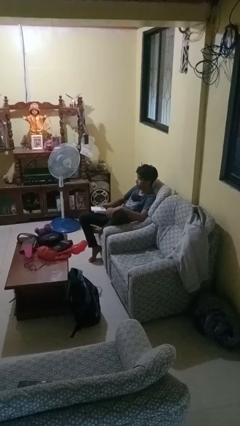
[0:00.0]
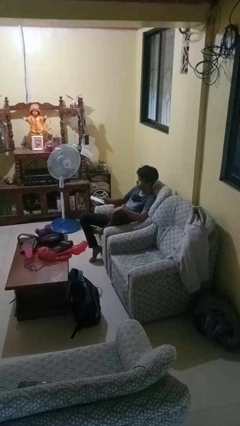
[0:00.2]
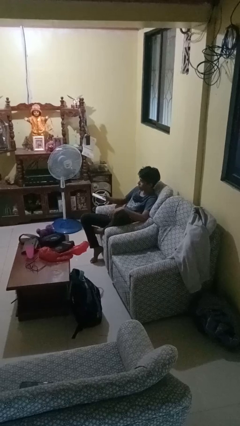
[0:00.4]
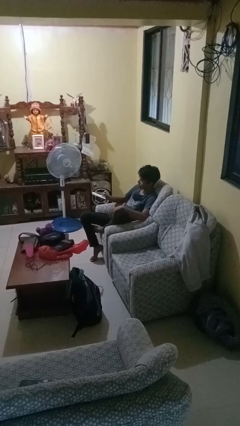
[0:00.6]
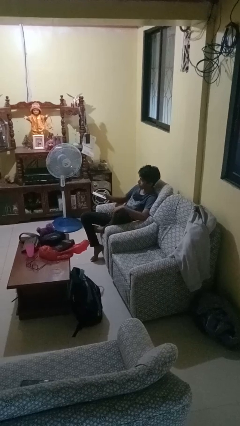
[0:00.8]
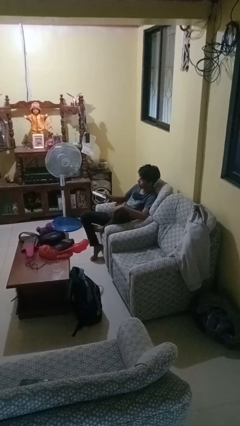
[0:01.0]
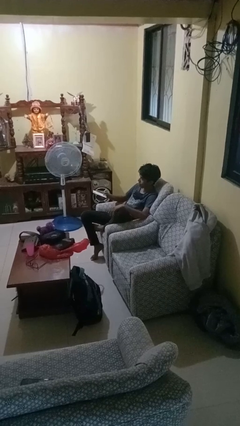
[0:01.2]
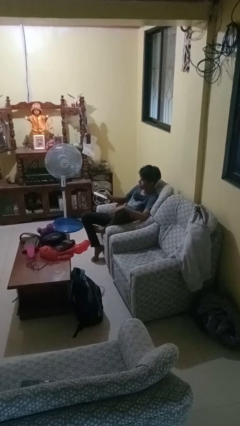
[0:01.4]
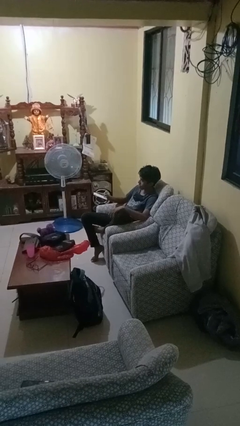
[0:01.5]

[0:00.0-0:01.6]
person uses television remote

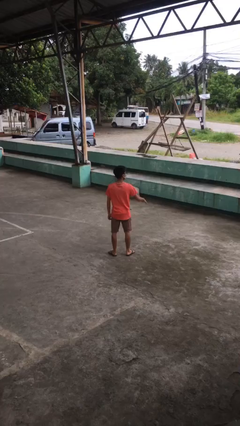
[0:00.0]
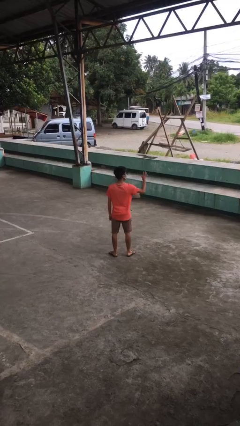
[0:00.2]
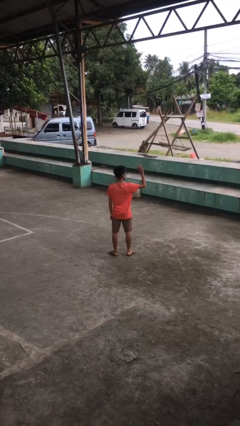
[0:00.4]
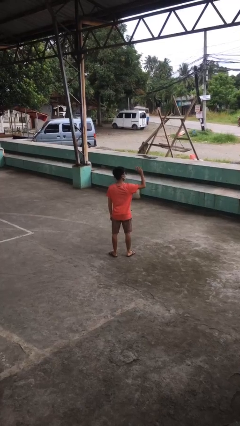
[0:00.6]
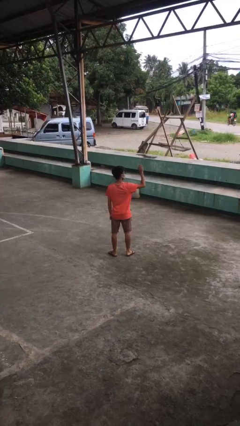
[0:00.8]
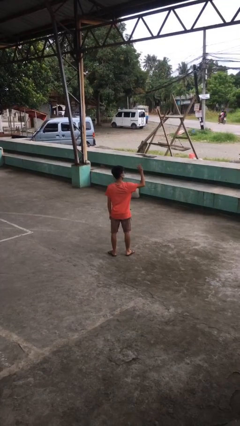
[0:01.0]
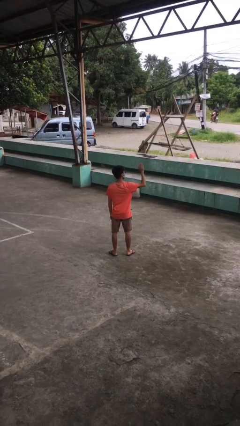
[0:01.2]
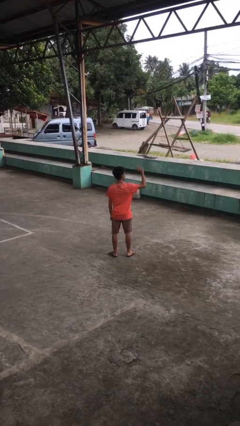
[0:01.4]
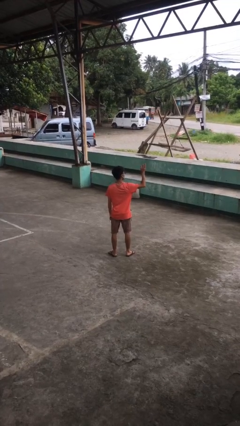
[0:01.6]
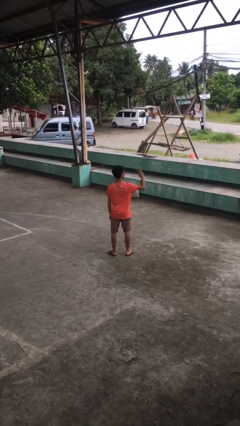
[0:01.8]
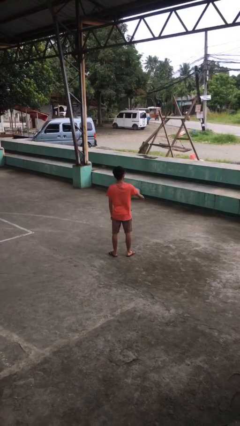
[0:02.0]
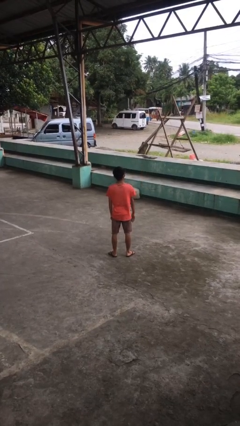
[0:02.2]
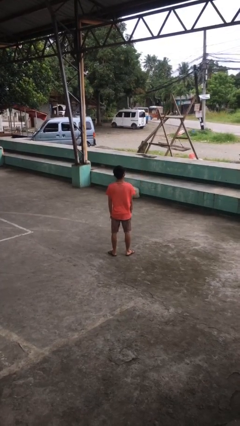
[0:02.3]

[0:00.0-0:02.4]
person waves at person

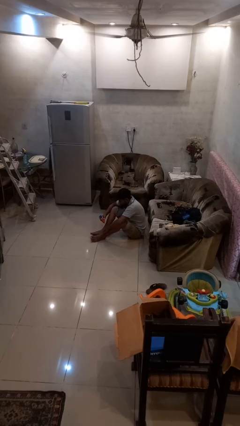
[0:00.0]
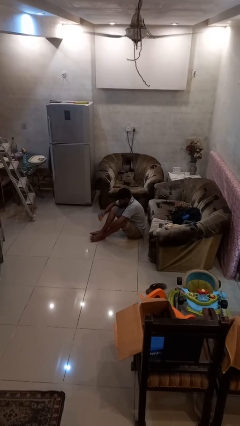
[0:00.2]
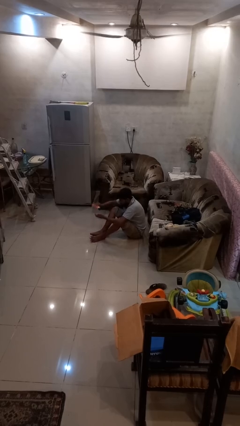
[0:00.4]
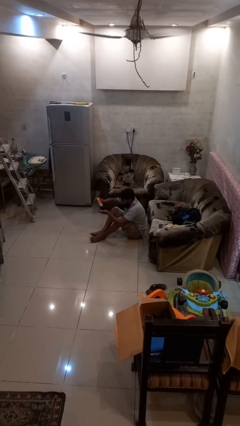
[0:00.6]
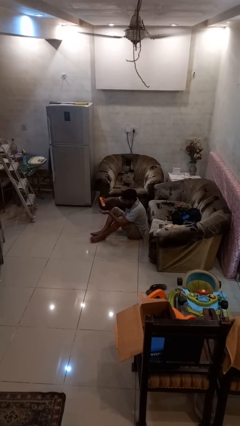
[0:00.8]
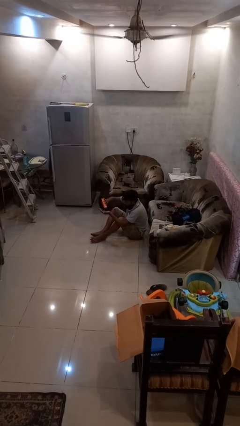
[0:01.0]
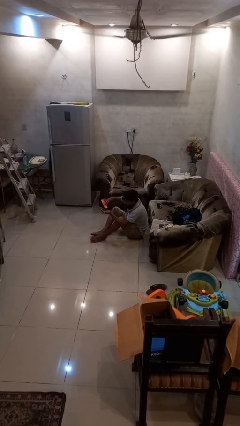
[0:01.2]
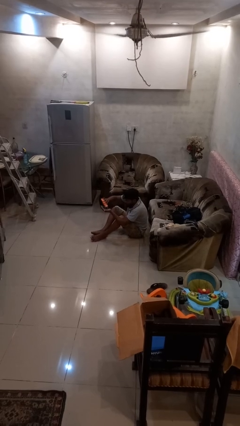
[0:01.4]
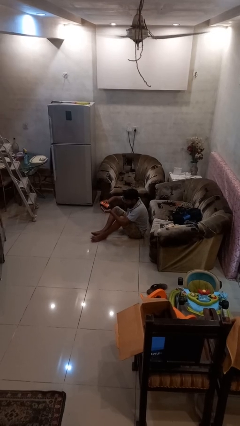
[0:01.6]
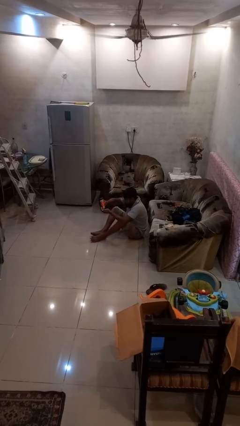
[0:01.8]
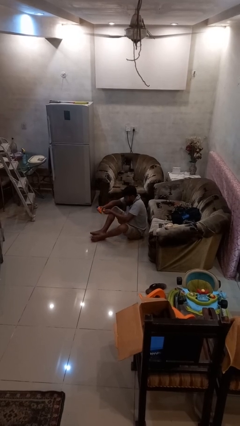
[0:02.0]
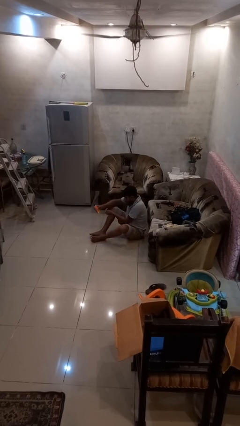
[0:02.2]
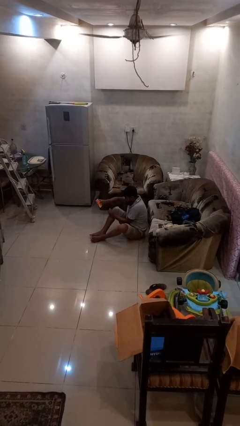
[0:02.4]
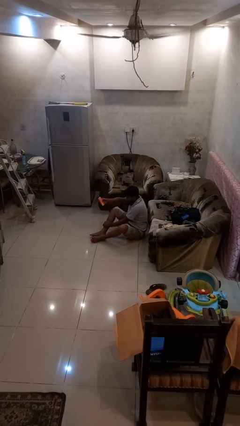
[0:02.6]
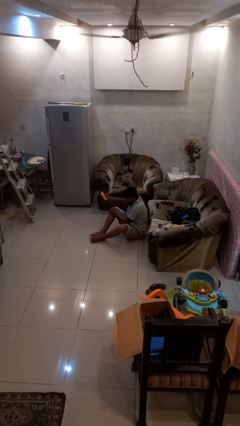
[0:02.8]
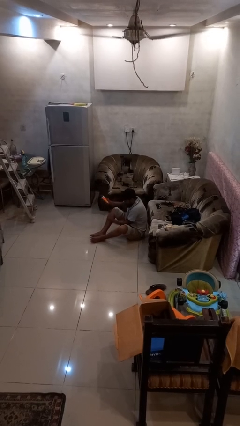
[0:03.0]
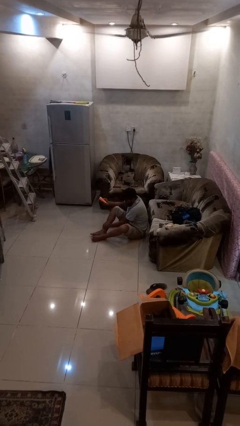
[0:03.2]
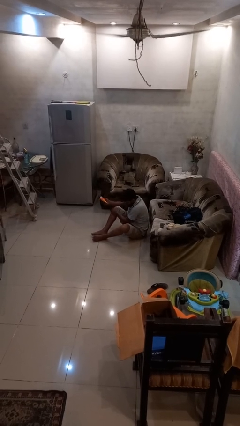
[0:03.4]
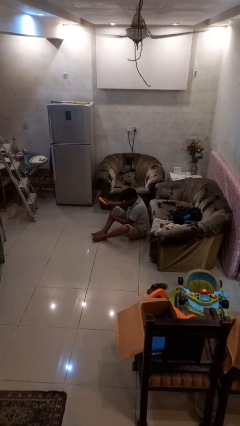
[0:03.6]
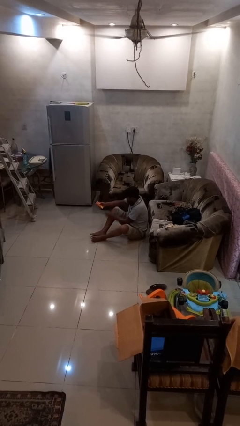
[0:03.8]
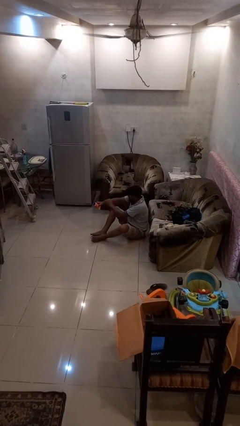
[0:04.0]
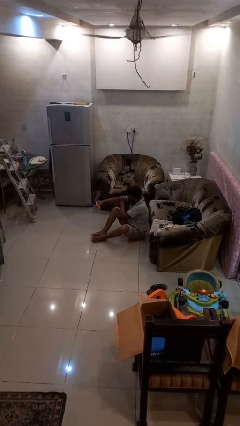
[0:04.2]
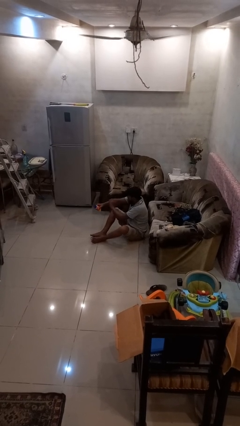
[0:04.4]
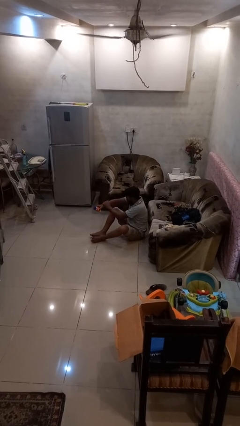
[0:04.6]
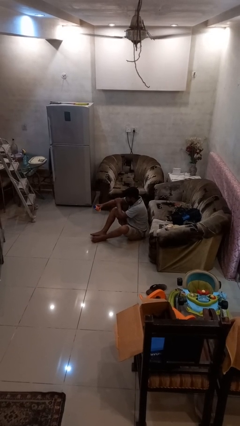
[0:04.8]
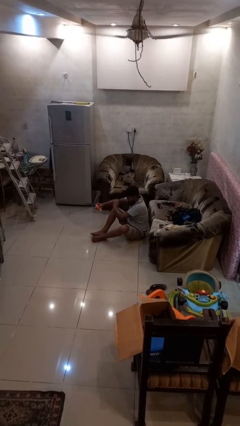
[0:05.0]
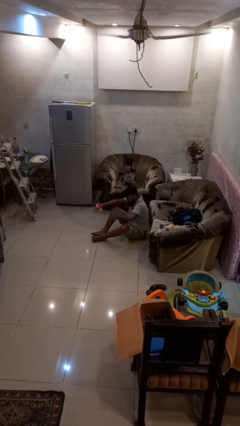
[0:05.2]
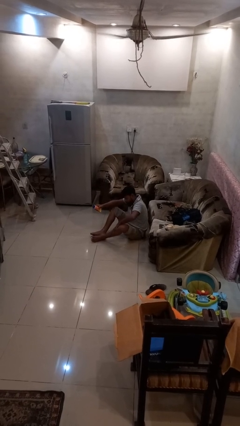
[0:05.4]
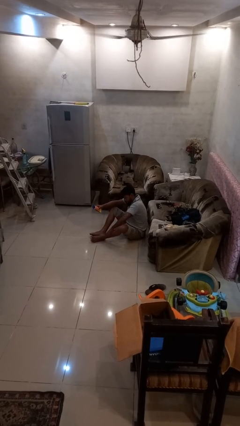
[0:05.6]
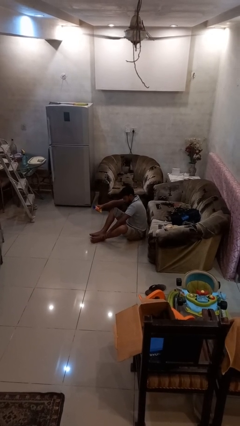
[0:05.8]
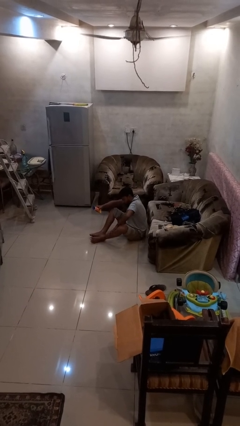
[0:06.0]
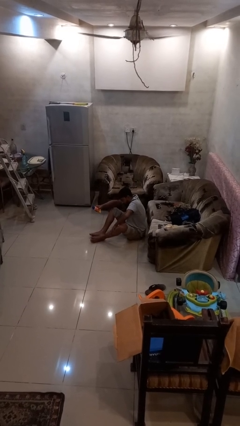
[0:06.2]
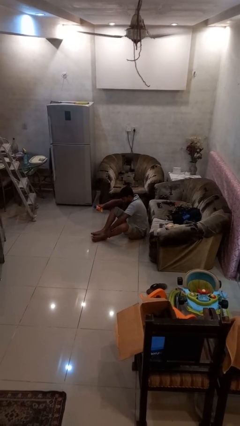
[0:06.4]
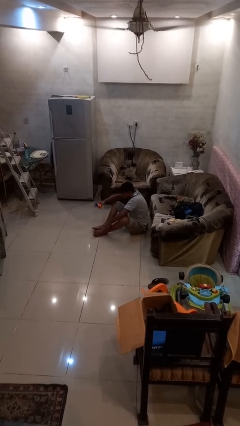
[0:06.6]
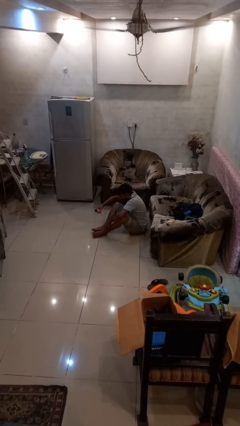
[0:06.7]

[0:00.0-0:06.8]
person applies sunscreen

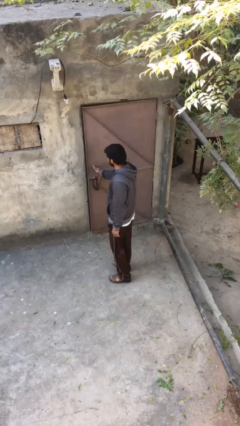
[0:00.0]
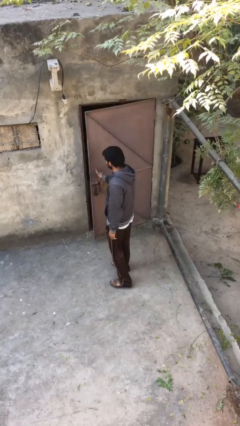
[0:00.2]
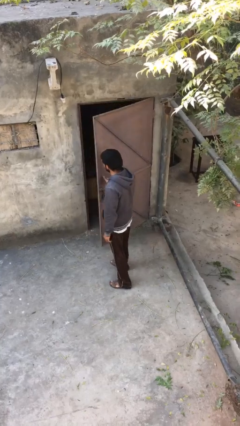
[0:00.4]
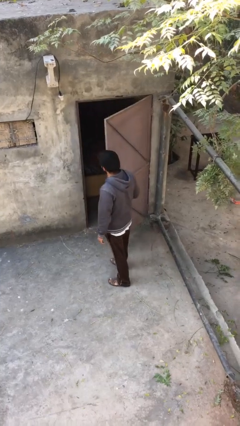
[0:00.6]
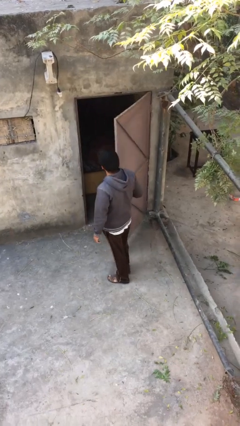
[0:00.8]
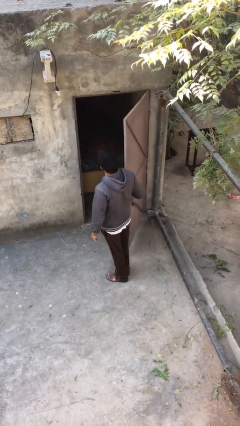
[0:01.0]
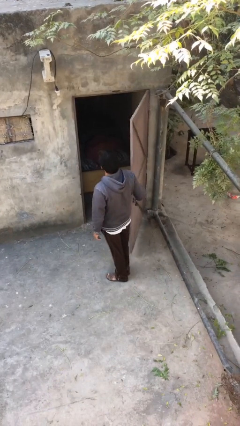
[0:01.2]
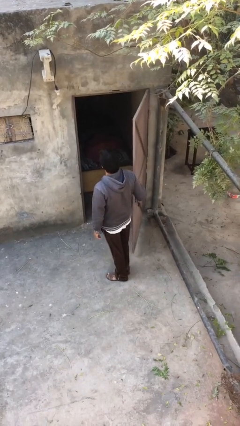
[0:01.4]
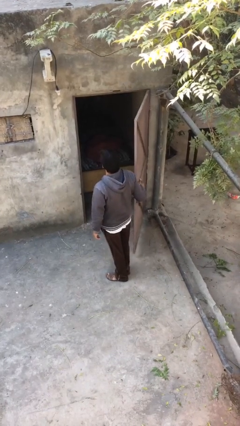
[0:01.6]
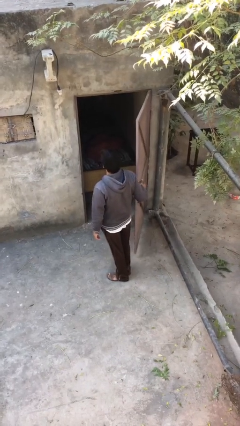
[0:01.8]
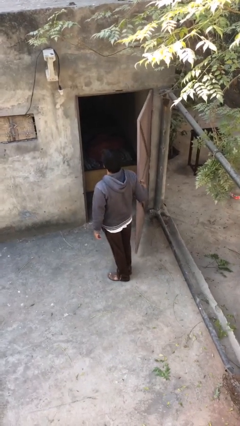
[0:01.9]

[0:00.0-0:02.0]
person opens facility door

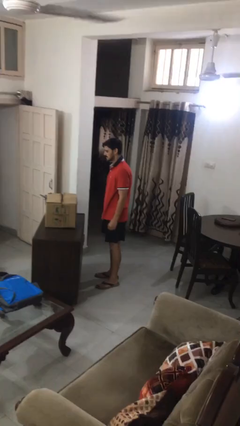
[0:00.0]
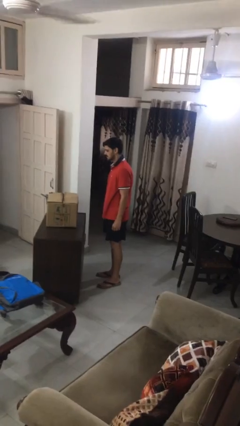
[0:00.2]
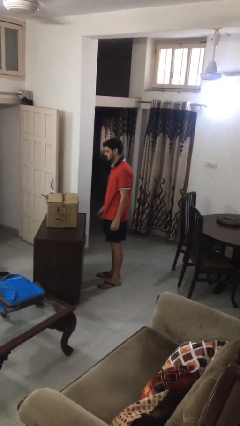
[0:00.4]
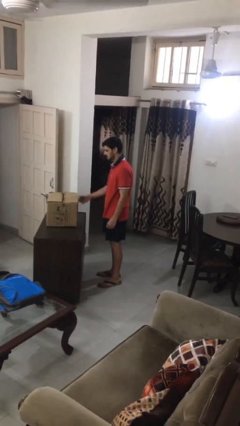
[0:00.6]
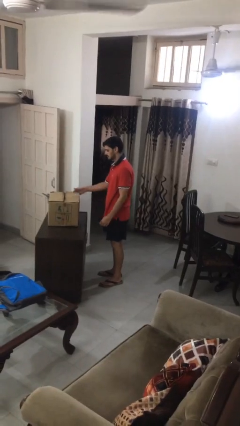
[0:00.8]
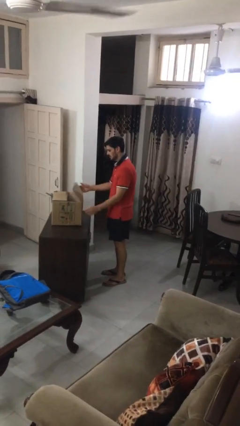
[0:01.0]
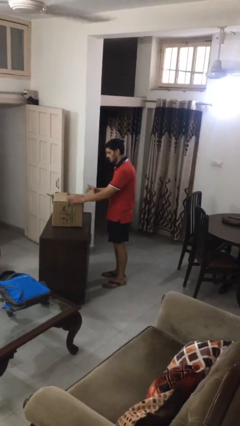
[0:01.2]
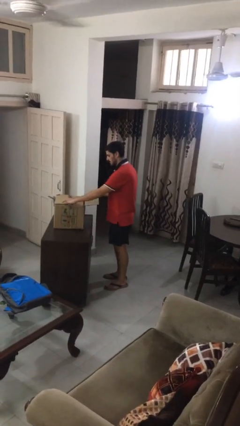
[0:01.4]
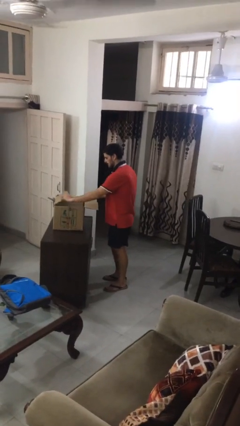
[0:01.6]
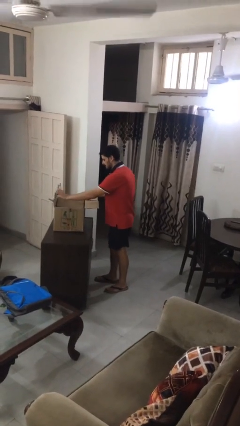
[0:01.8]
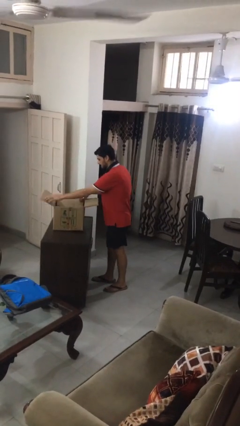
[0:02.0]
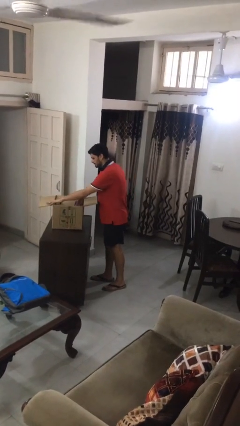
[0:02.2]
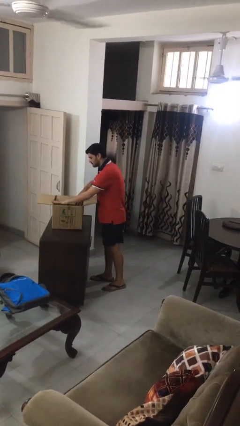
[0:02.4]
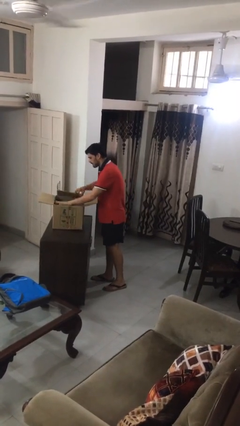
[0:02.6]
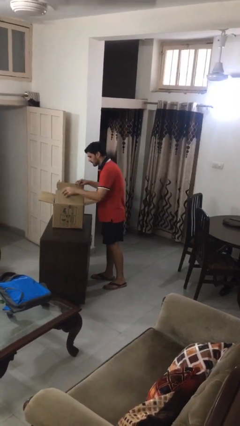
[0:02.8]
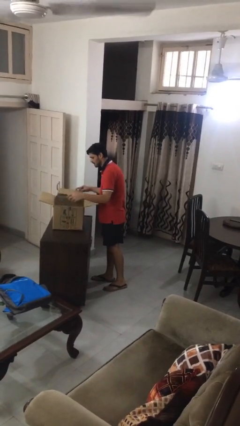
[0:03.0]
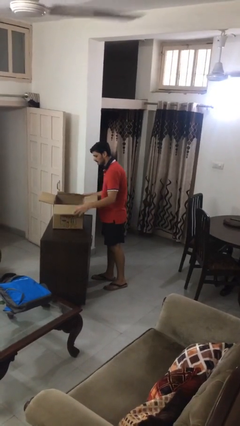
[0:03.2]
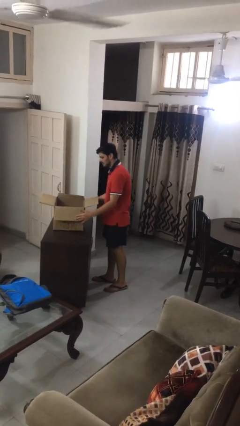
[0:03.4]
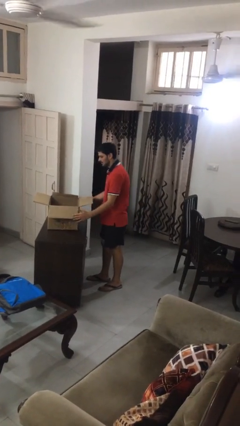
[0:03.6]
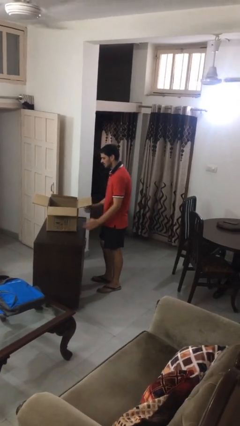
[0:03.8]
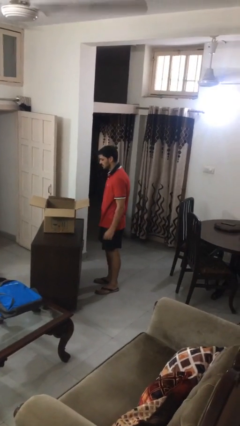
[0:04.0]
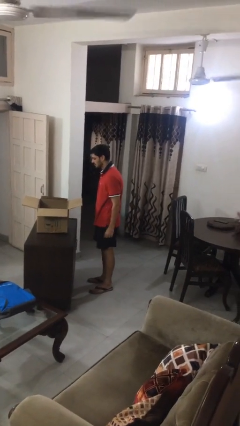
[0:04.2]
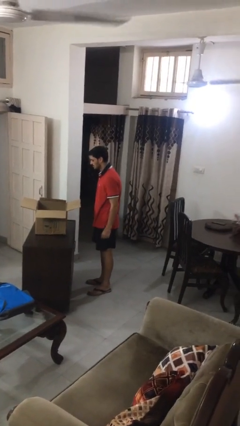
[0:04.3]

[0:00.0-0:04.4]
person opens box

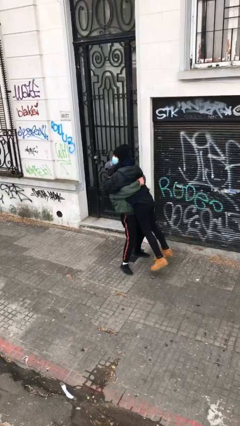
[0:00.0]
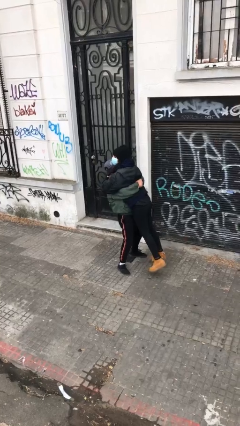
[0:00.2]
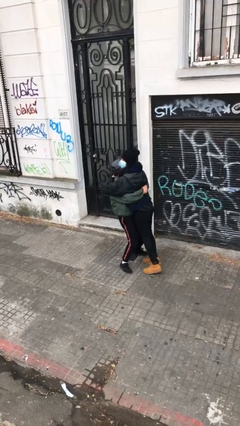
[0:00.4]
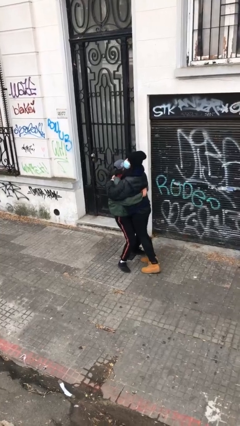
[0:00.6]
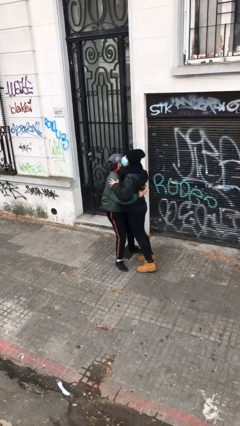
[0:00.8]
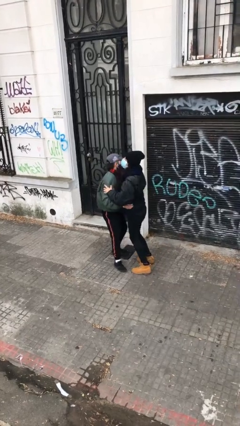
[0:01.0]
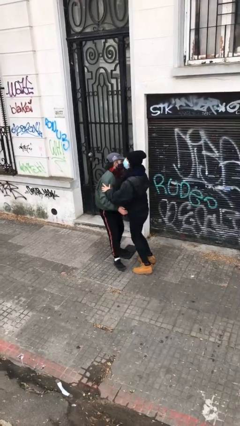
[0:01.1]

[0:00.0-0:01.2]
person puts down person
